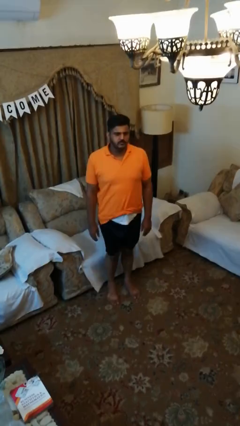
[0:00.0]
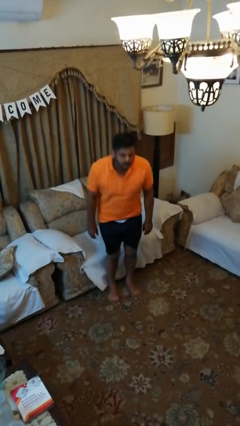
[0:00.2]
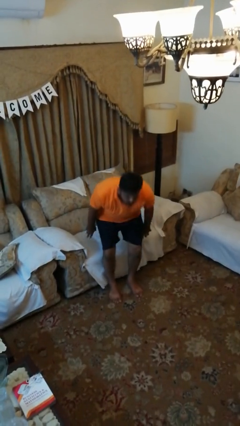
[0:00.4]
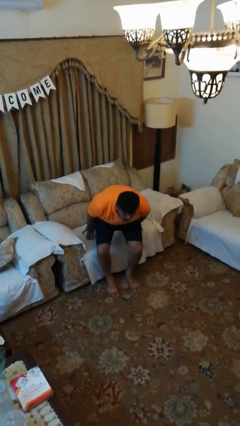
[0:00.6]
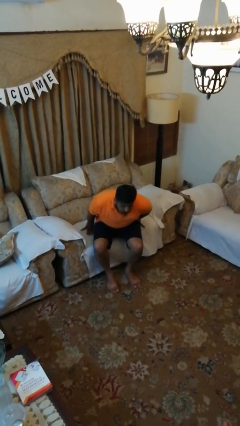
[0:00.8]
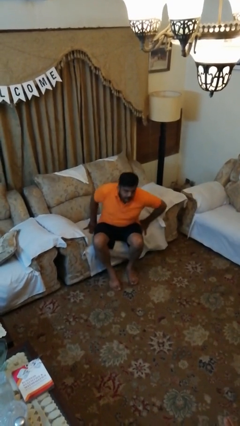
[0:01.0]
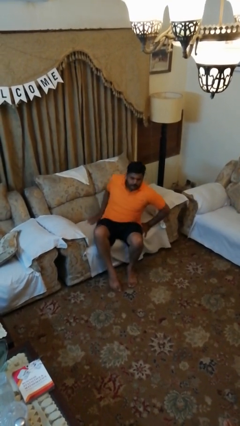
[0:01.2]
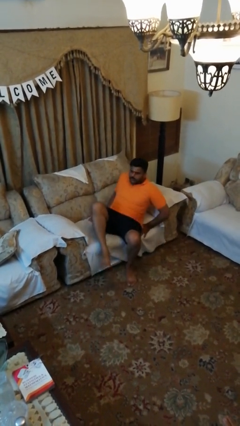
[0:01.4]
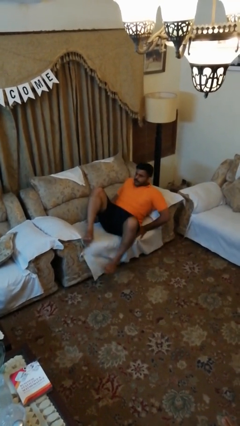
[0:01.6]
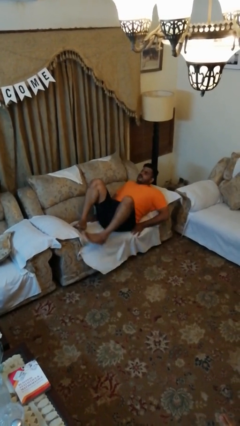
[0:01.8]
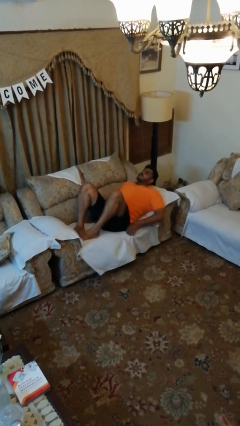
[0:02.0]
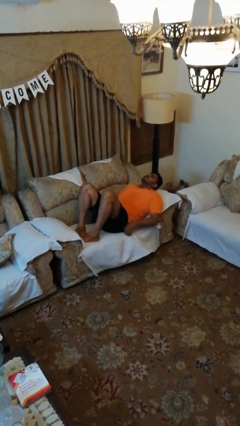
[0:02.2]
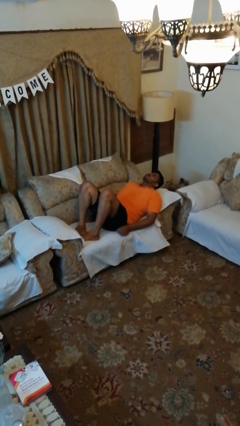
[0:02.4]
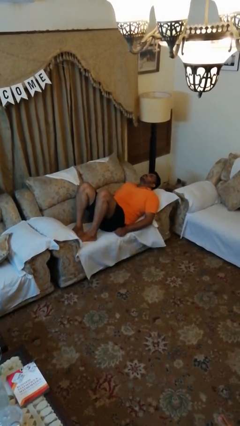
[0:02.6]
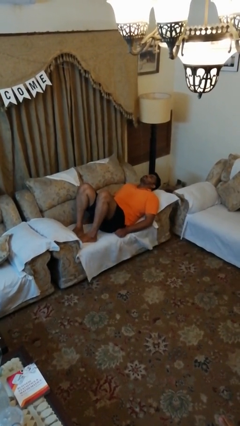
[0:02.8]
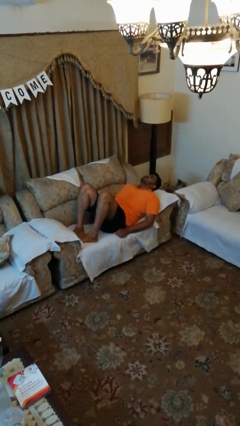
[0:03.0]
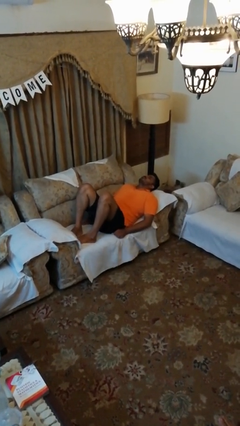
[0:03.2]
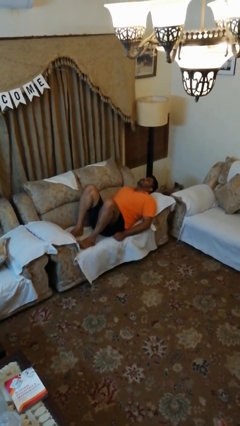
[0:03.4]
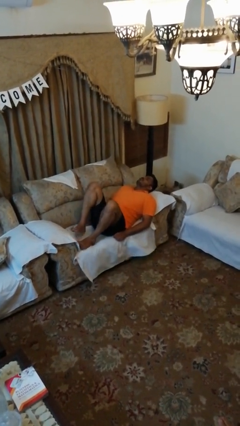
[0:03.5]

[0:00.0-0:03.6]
person lies down on couch

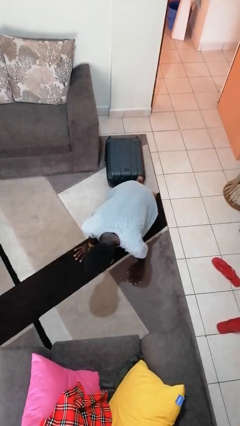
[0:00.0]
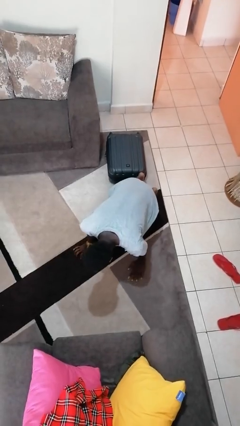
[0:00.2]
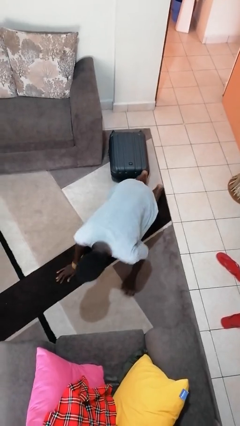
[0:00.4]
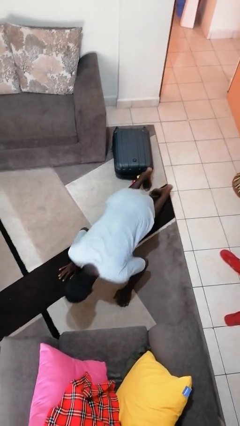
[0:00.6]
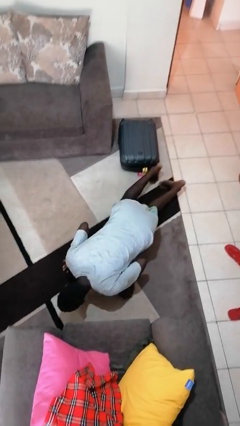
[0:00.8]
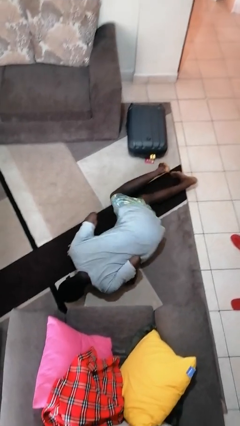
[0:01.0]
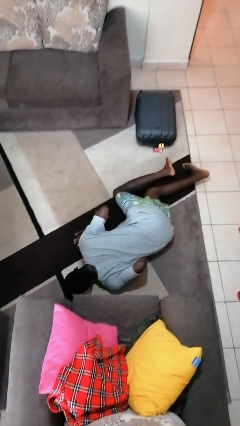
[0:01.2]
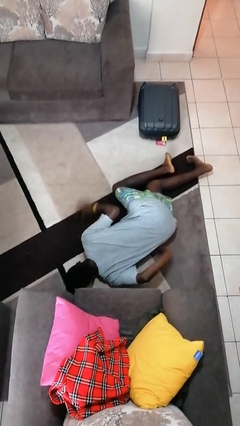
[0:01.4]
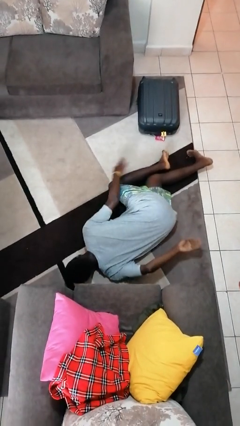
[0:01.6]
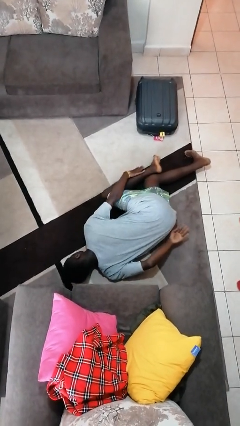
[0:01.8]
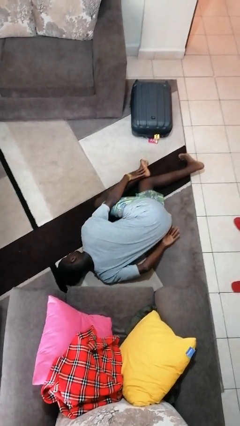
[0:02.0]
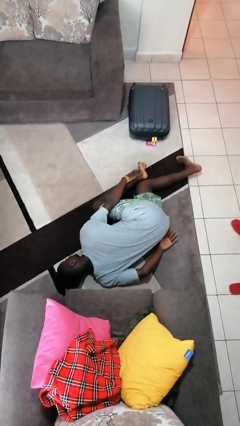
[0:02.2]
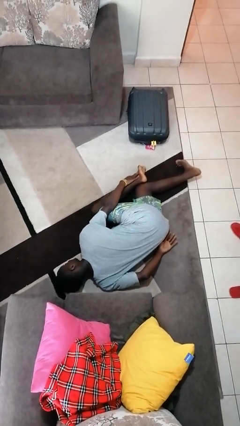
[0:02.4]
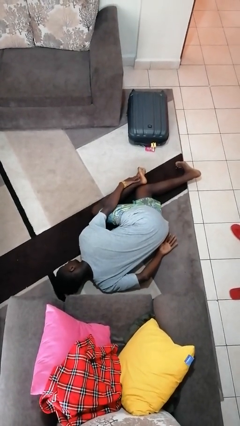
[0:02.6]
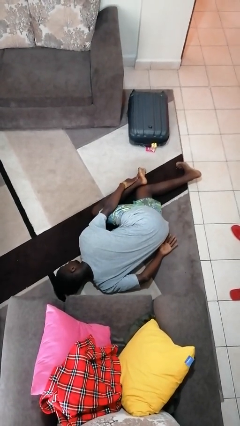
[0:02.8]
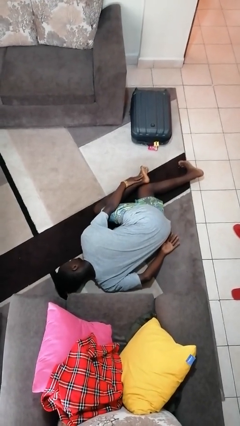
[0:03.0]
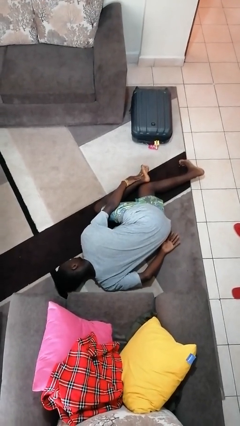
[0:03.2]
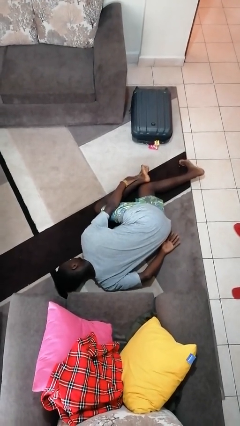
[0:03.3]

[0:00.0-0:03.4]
person lies down on floor

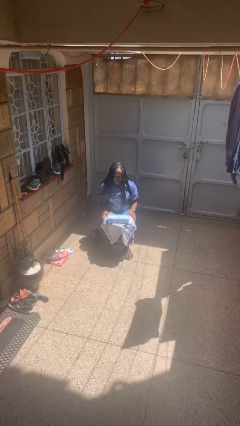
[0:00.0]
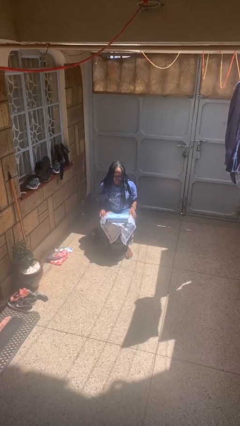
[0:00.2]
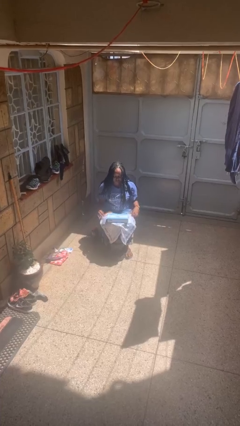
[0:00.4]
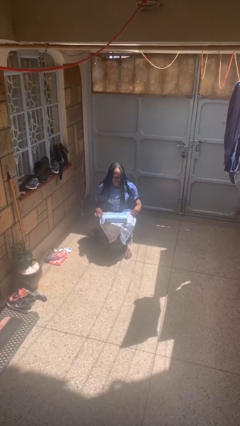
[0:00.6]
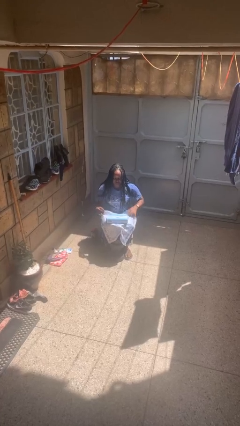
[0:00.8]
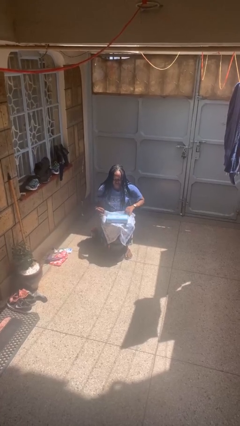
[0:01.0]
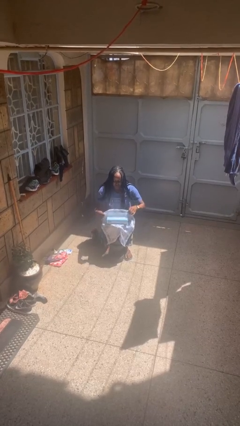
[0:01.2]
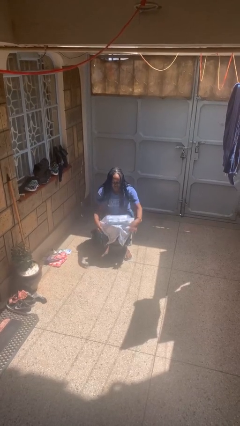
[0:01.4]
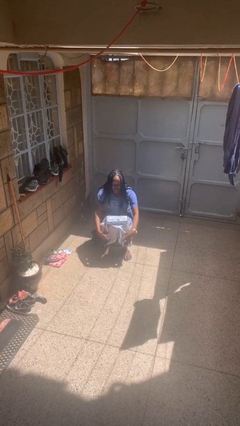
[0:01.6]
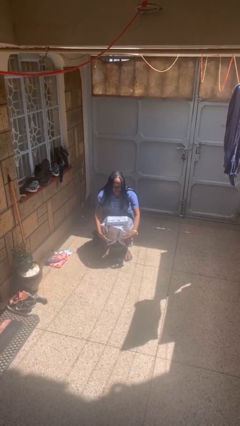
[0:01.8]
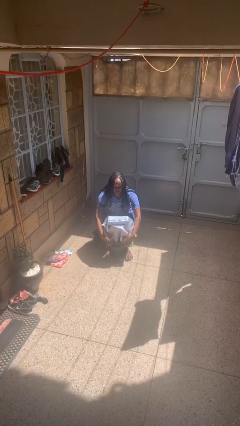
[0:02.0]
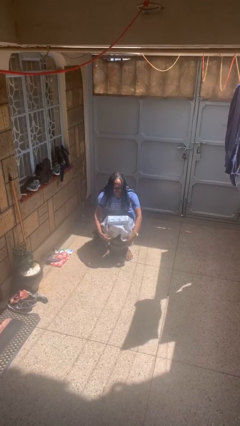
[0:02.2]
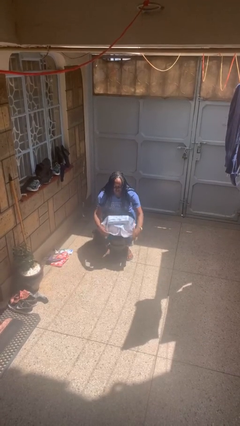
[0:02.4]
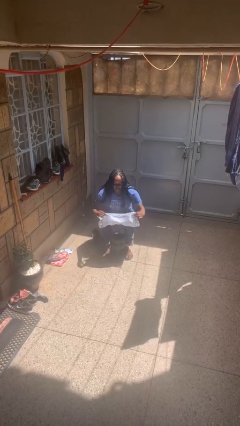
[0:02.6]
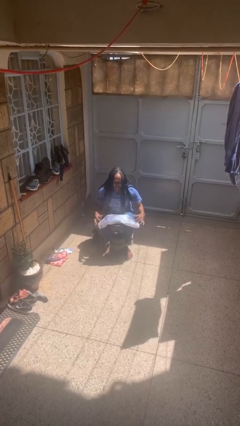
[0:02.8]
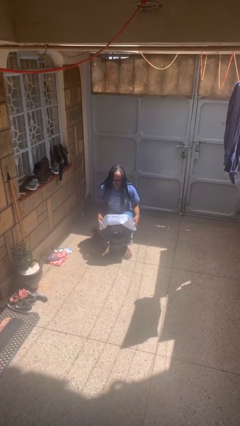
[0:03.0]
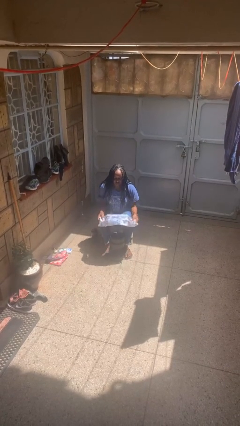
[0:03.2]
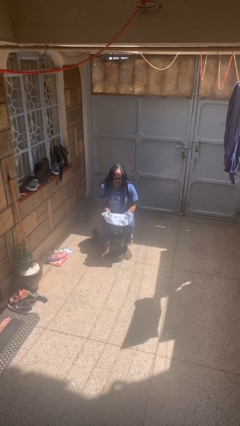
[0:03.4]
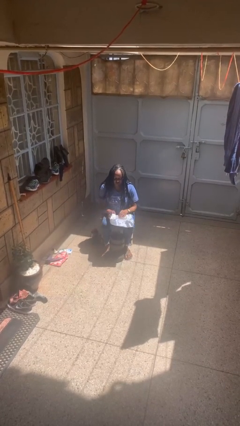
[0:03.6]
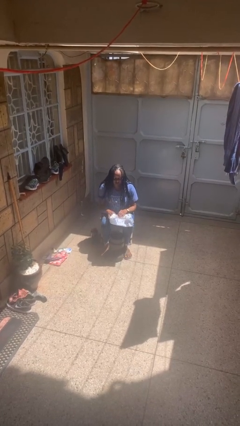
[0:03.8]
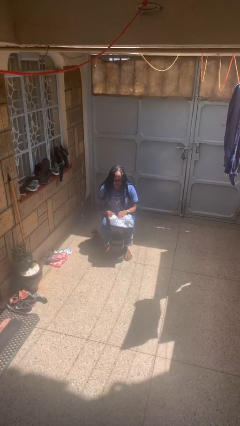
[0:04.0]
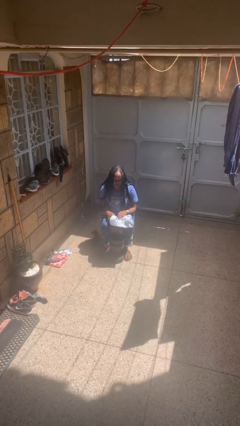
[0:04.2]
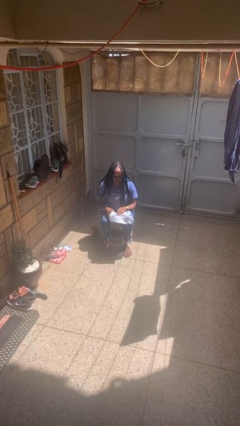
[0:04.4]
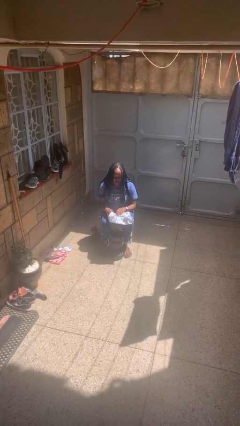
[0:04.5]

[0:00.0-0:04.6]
person wraps box

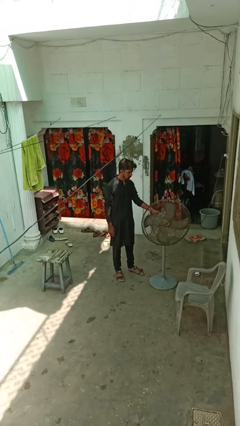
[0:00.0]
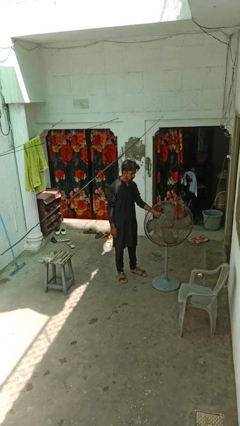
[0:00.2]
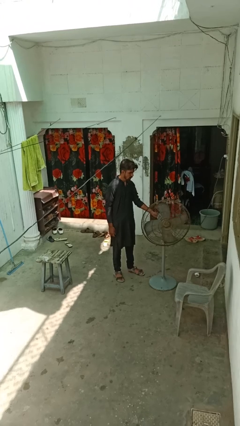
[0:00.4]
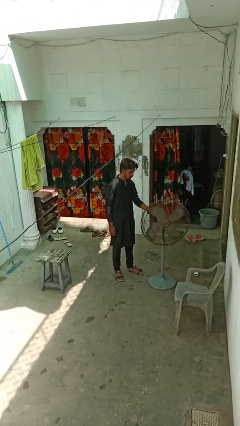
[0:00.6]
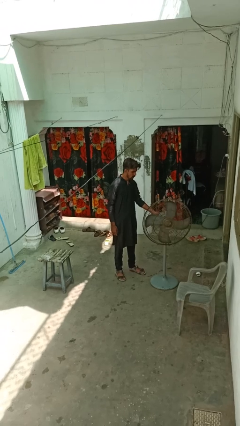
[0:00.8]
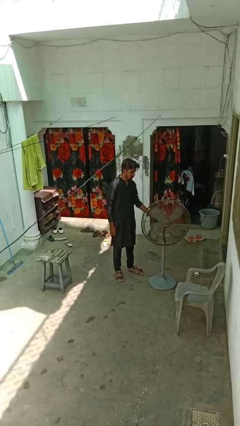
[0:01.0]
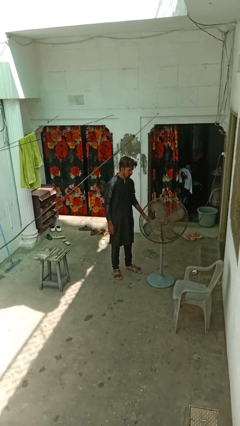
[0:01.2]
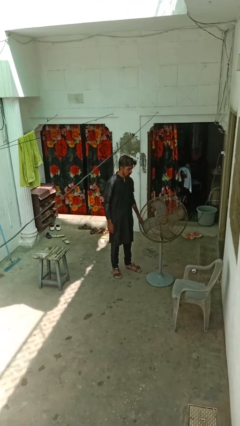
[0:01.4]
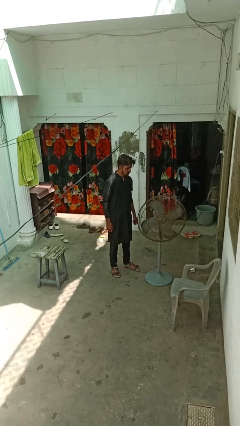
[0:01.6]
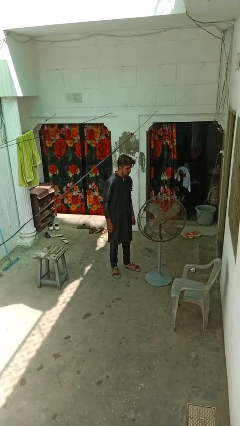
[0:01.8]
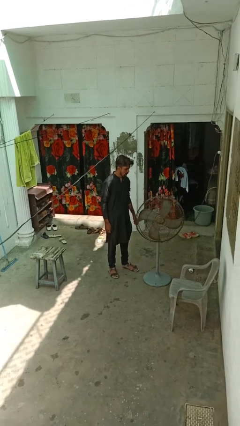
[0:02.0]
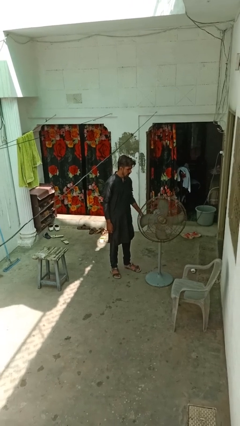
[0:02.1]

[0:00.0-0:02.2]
person turns off fan

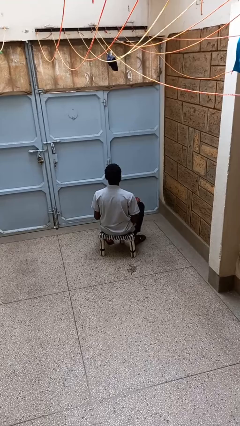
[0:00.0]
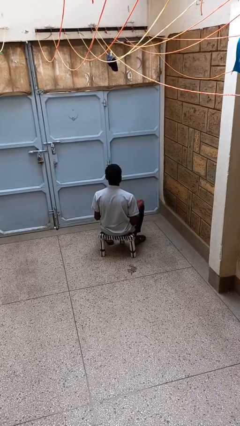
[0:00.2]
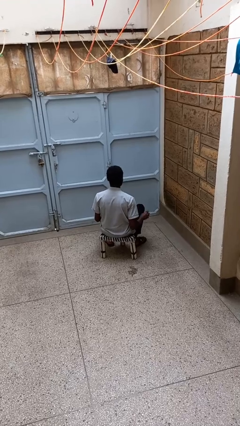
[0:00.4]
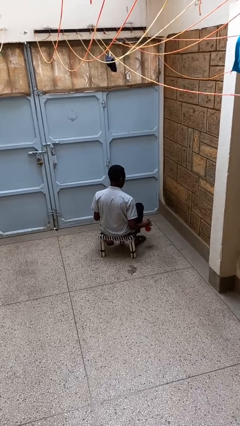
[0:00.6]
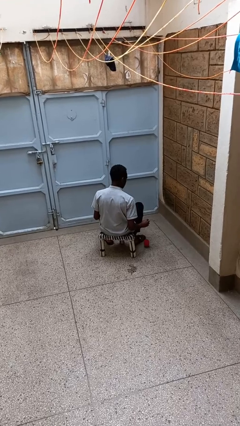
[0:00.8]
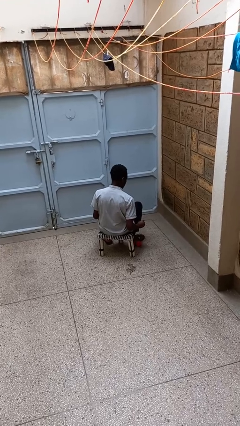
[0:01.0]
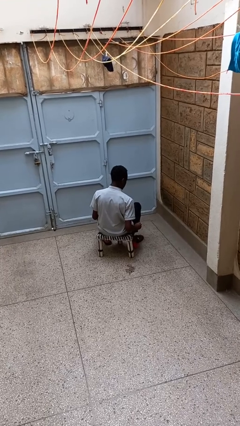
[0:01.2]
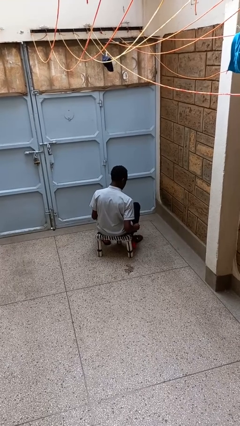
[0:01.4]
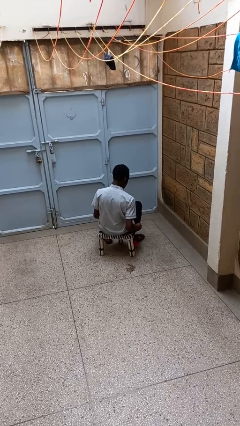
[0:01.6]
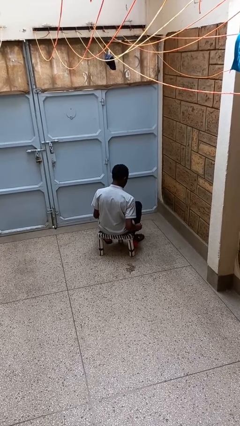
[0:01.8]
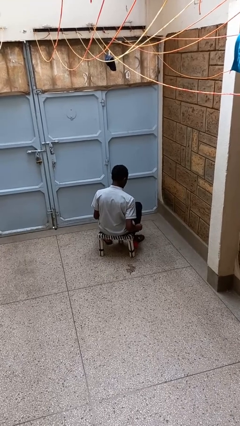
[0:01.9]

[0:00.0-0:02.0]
person drops object

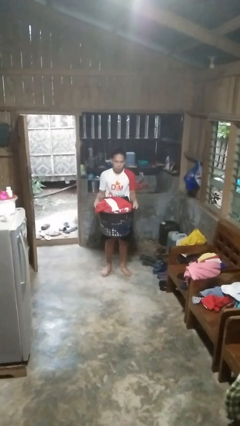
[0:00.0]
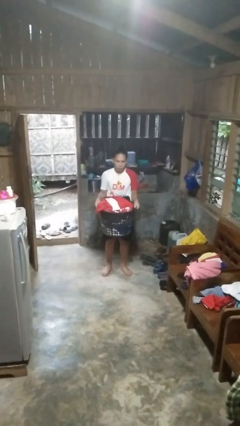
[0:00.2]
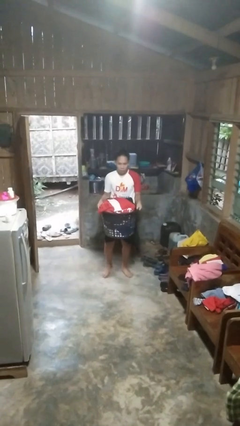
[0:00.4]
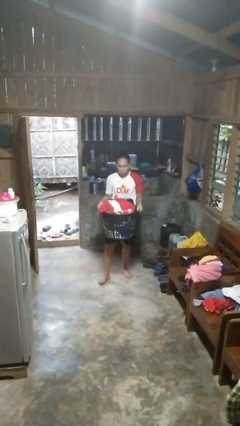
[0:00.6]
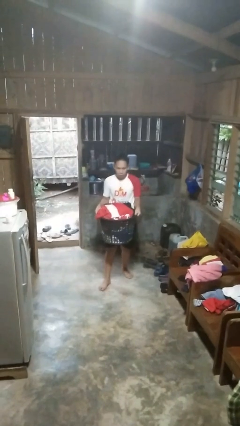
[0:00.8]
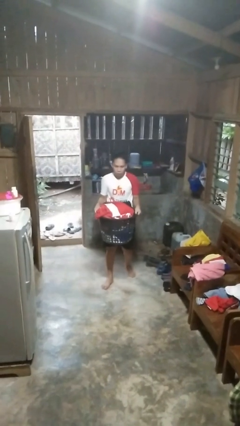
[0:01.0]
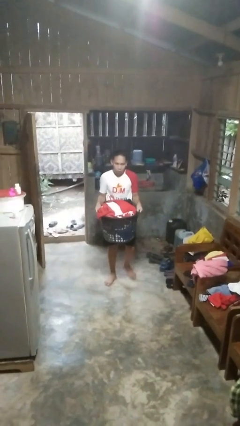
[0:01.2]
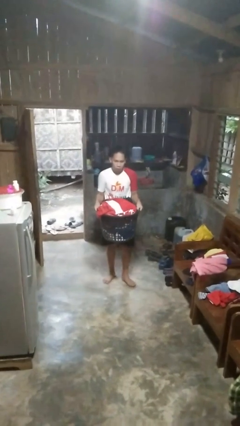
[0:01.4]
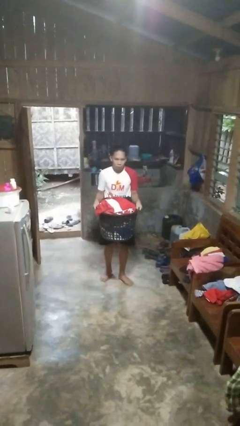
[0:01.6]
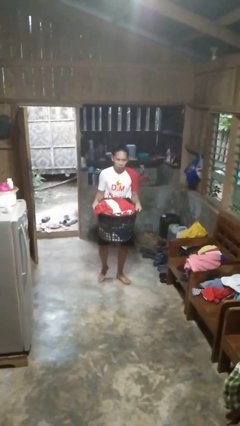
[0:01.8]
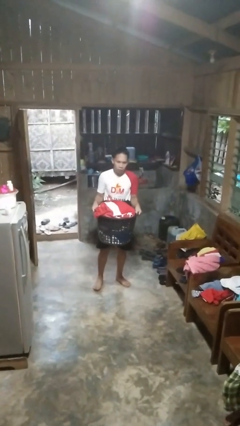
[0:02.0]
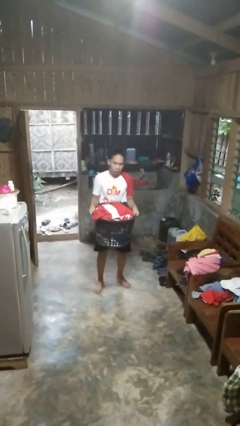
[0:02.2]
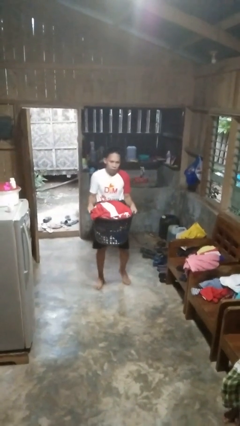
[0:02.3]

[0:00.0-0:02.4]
person carries laundry basket
